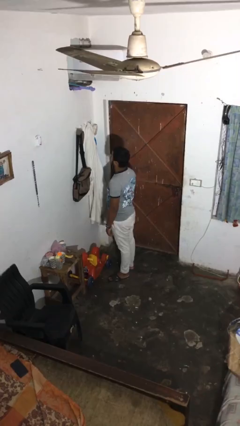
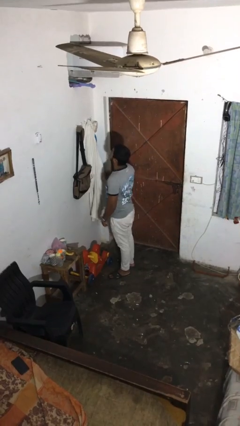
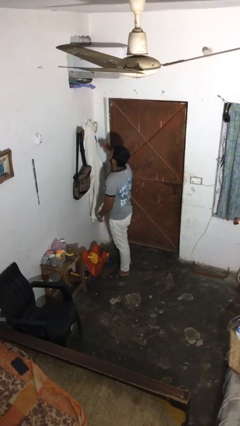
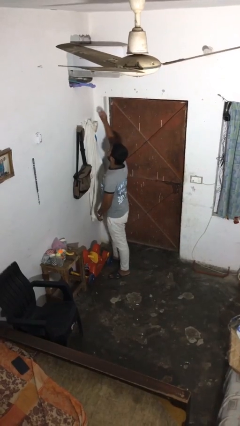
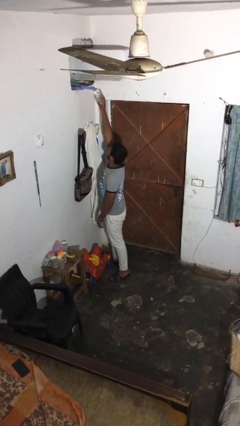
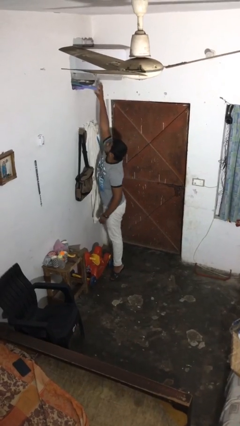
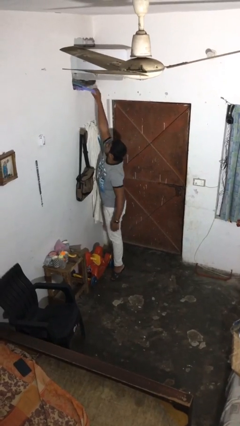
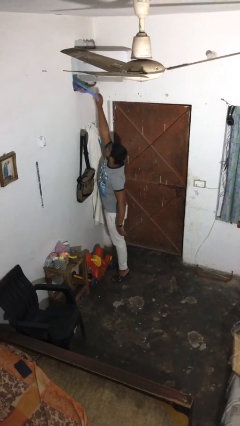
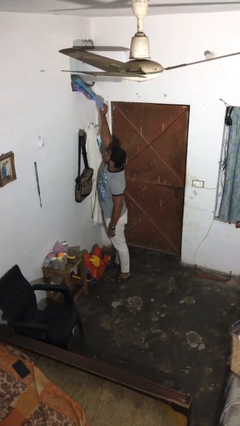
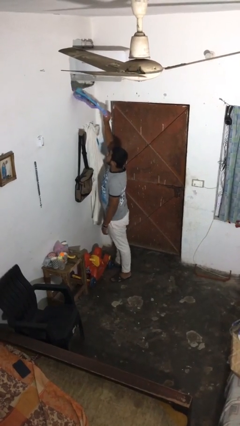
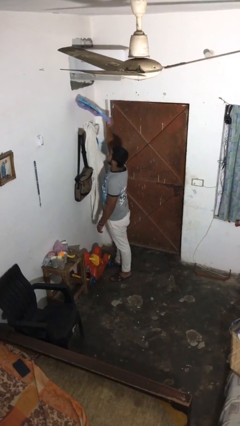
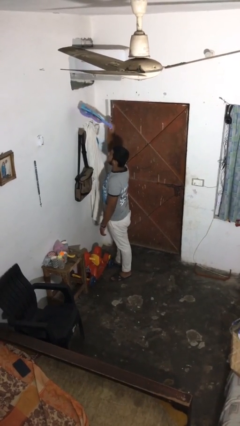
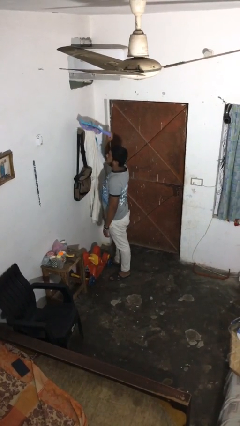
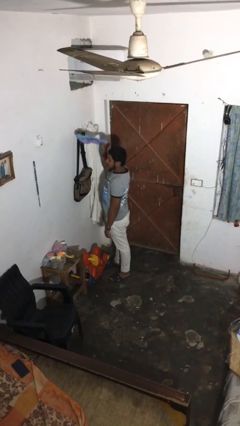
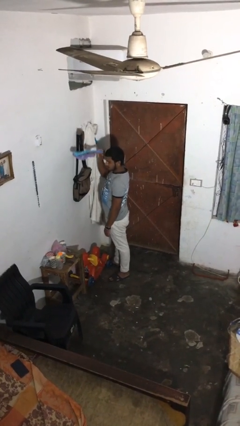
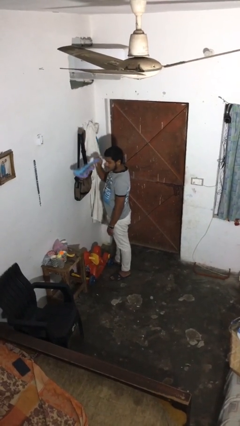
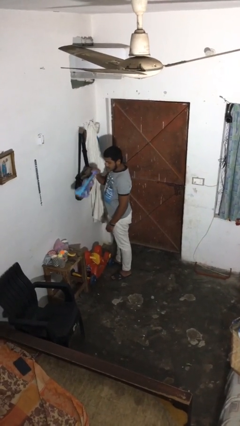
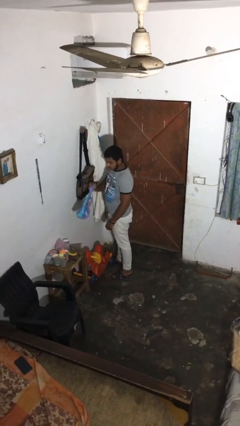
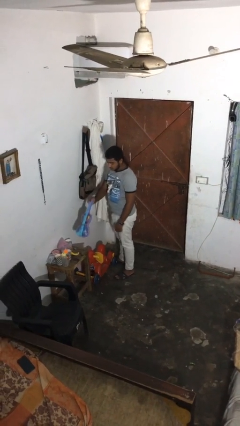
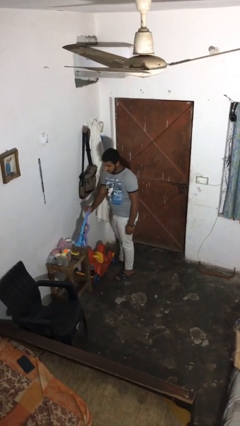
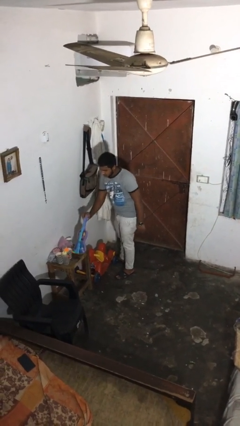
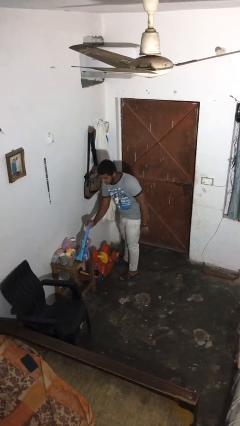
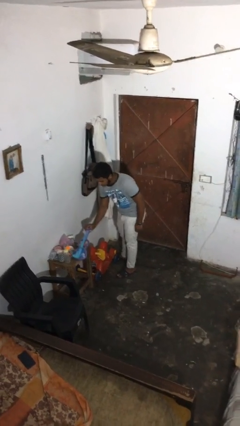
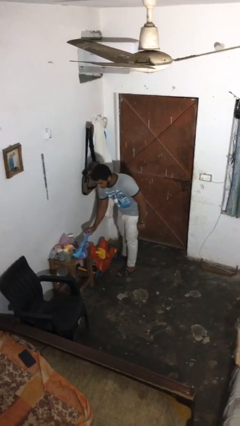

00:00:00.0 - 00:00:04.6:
person picks up object from shelf

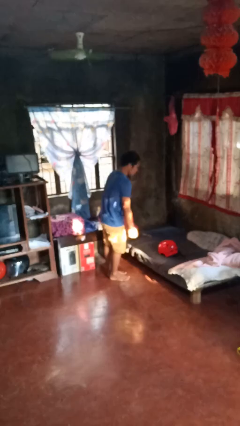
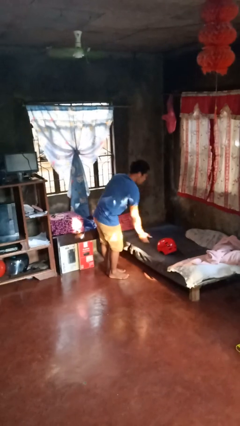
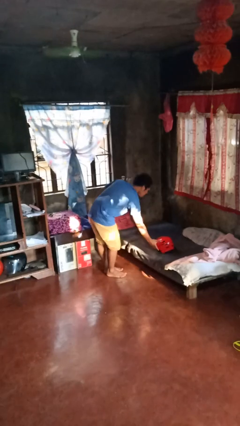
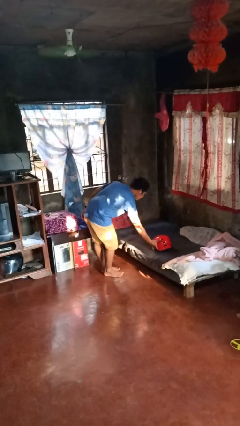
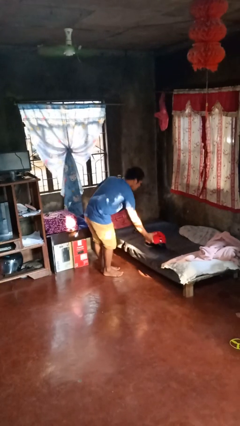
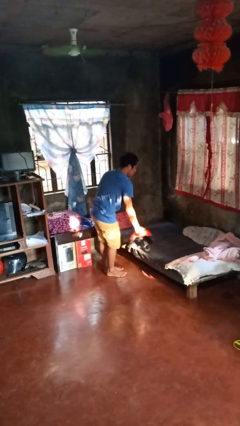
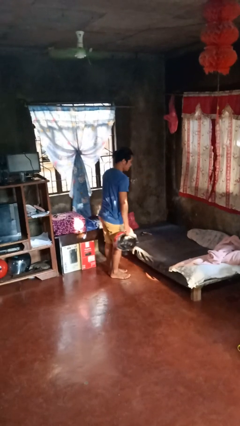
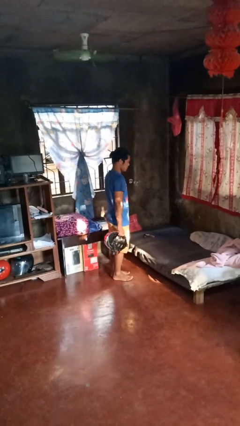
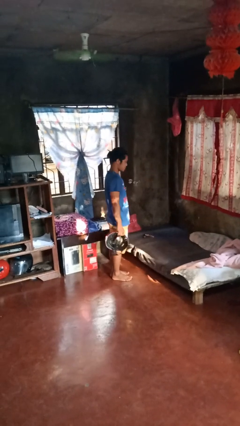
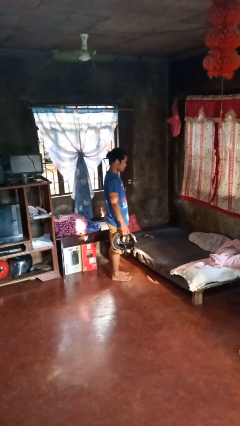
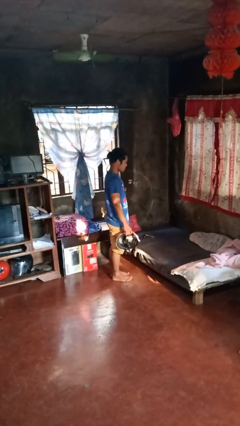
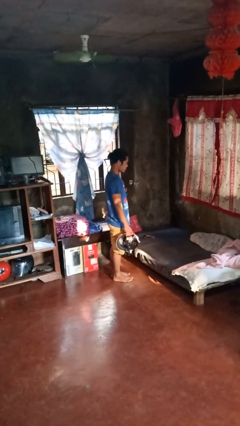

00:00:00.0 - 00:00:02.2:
person picks up object from bed

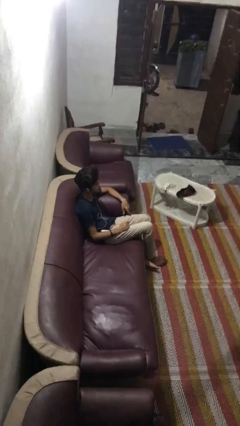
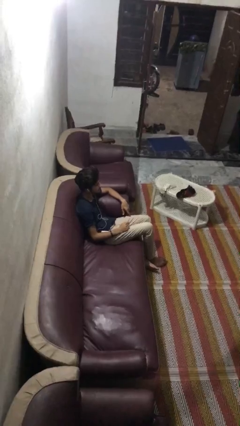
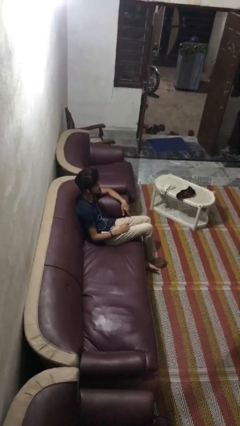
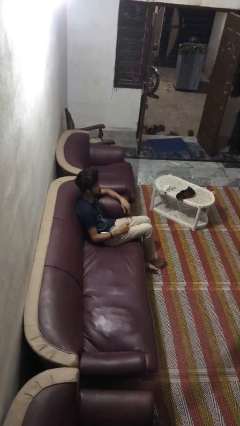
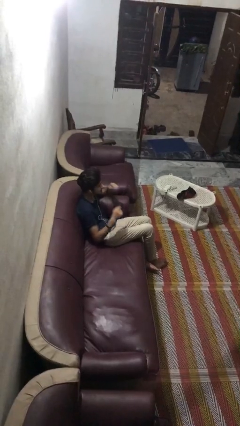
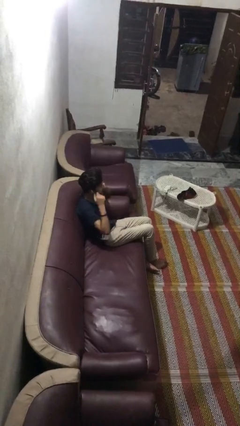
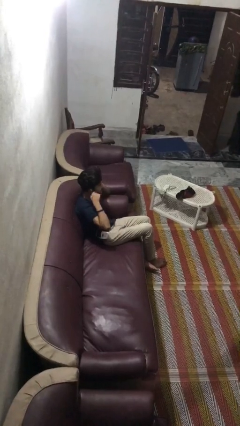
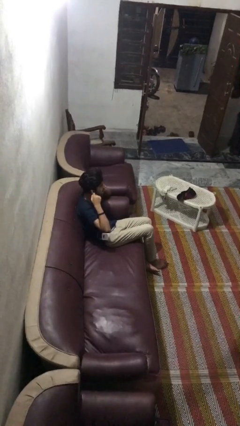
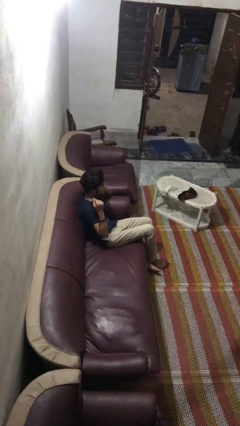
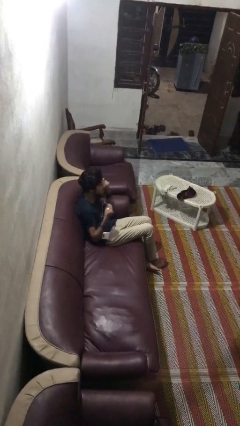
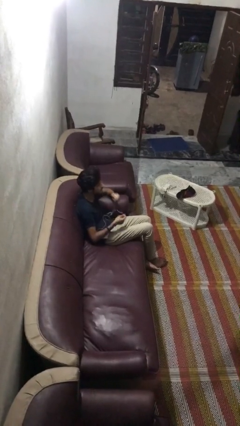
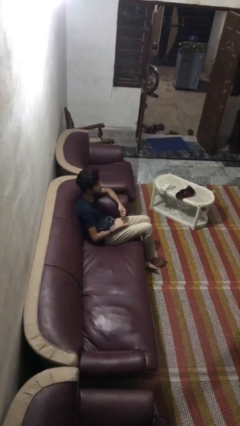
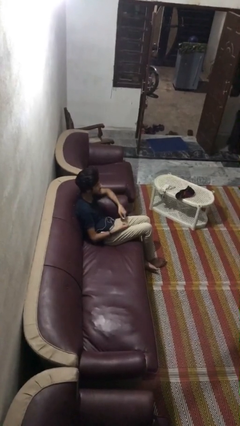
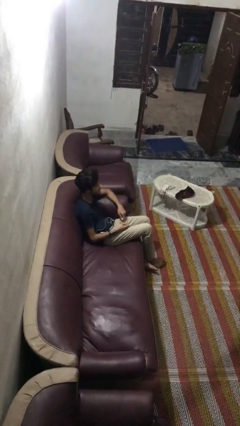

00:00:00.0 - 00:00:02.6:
person takes off headphones

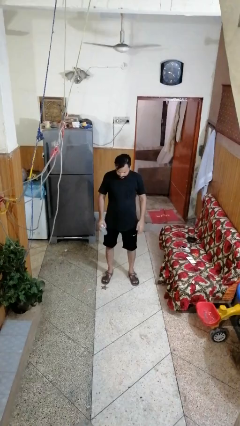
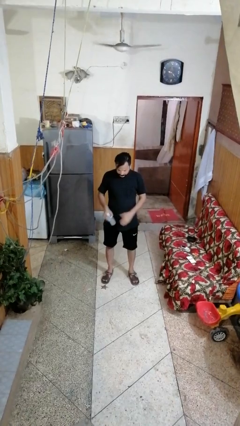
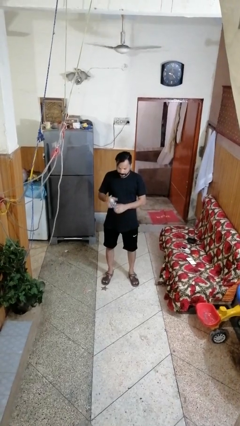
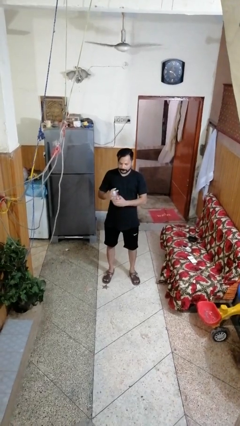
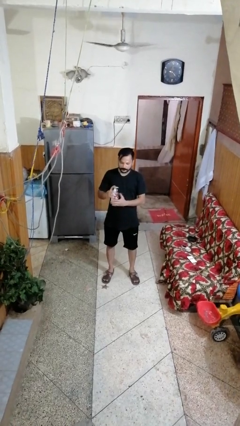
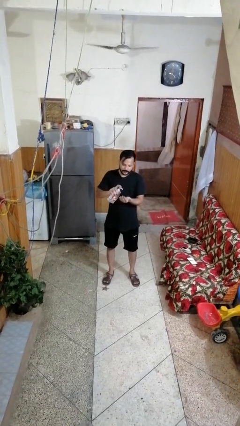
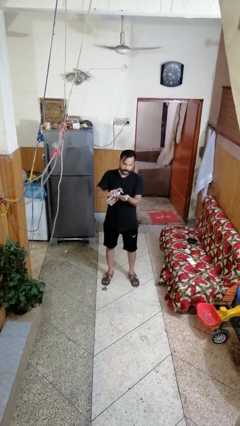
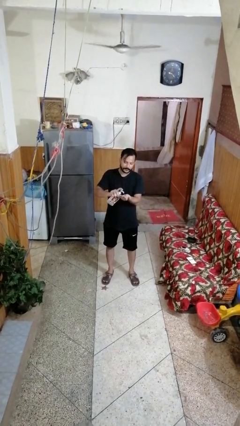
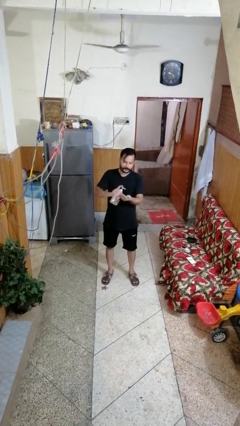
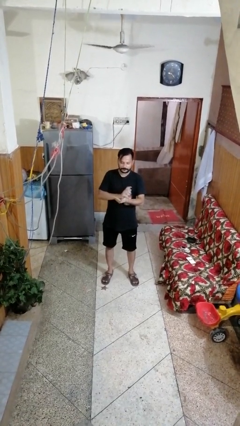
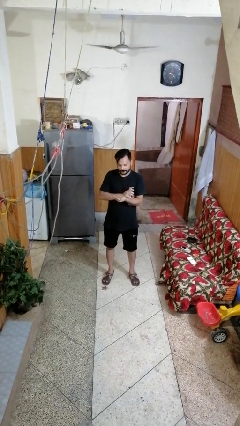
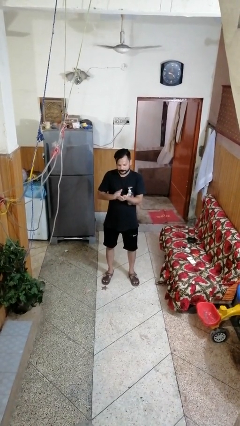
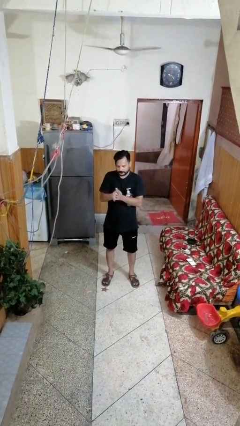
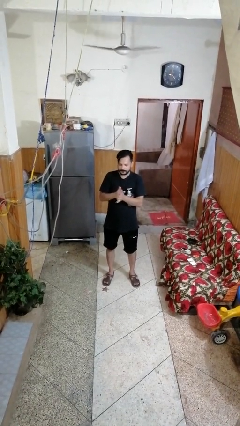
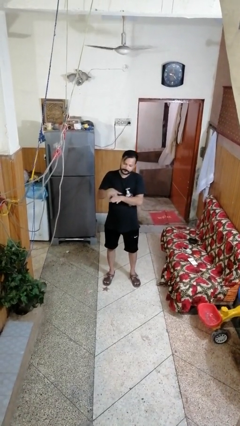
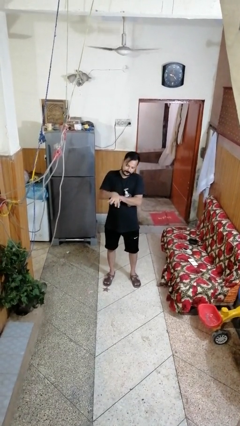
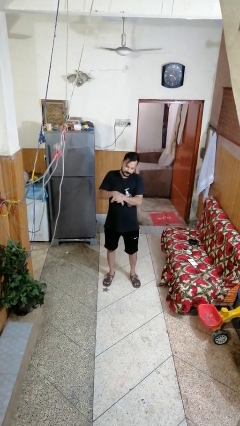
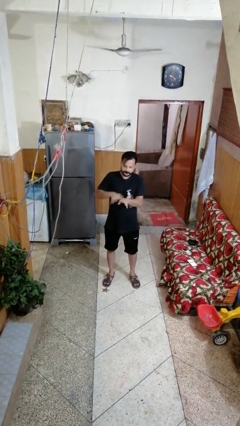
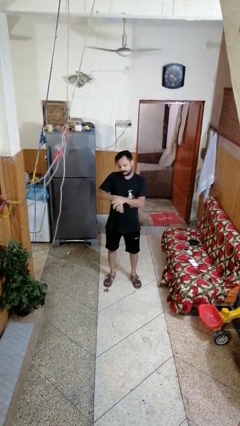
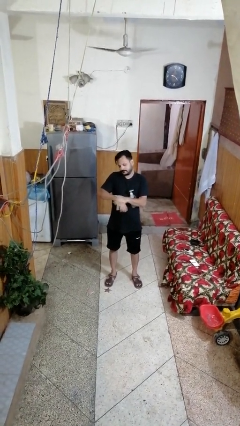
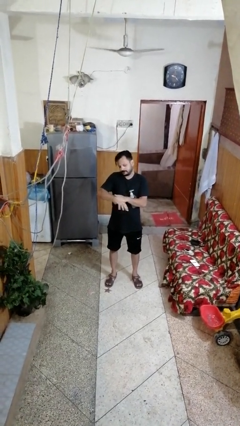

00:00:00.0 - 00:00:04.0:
person applies sunscreen

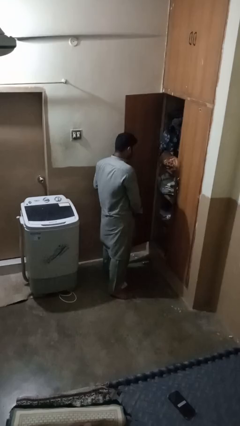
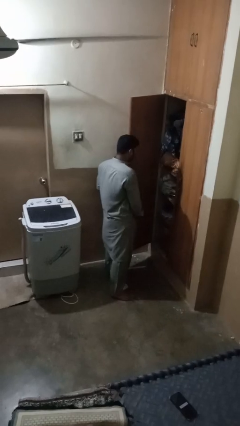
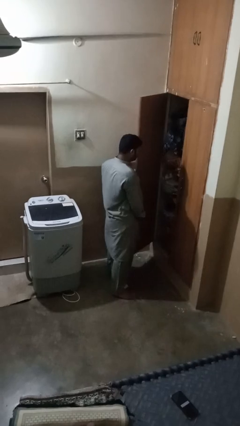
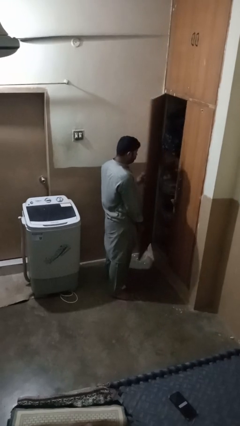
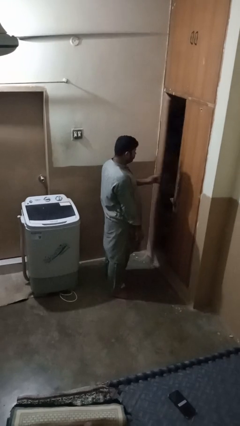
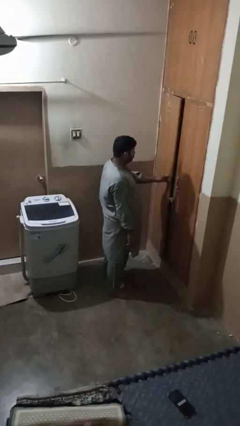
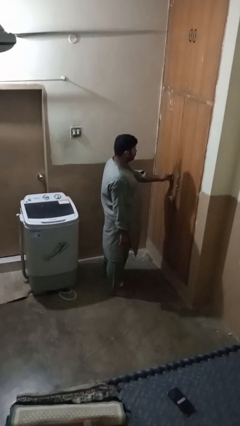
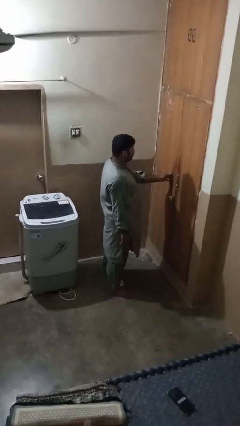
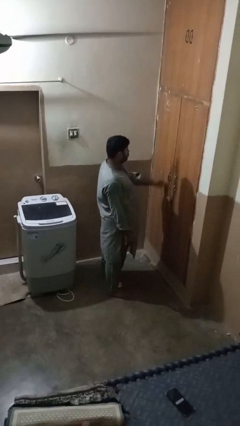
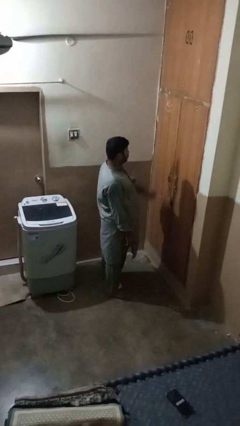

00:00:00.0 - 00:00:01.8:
person closes closet door

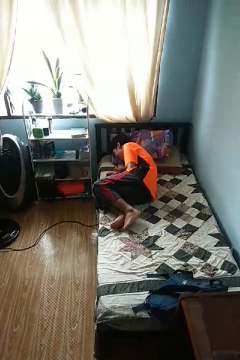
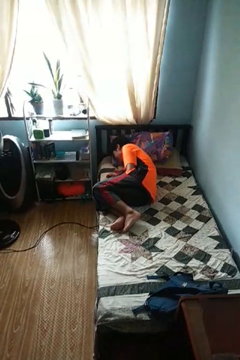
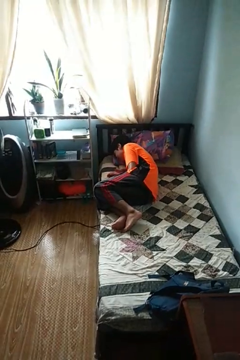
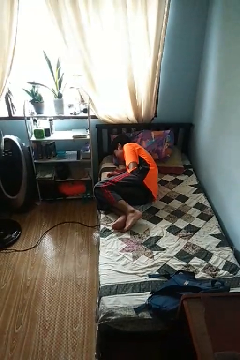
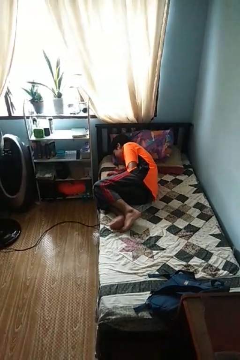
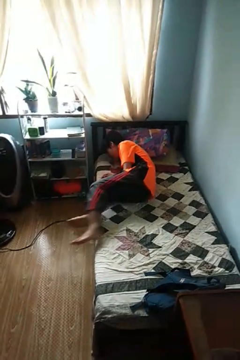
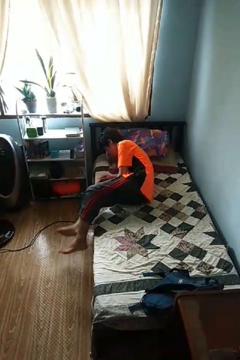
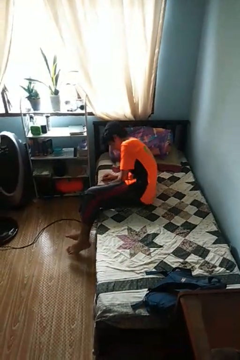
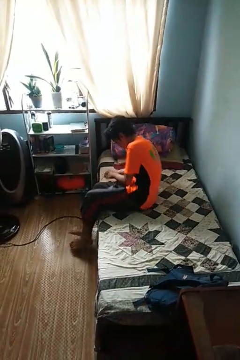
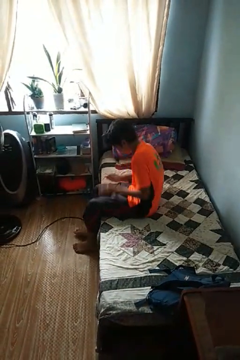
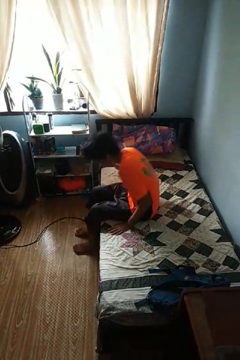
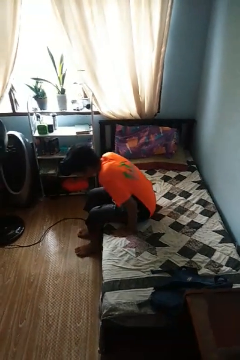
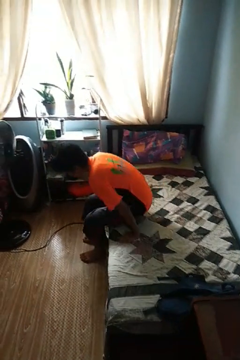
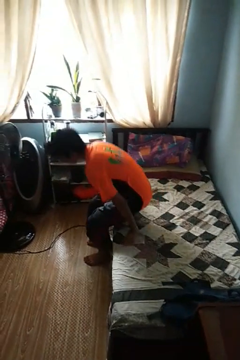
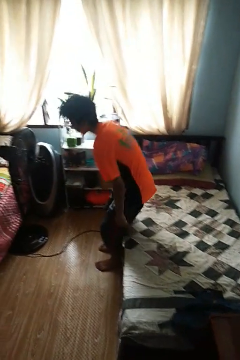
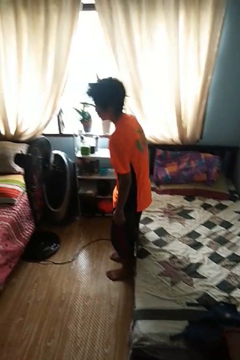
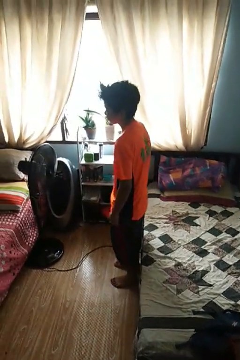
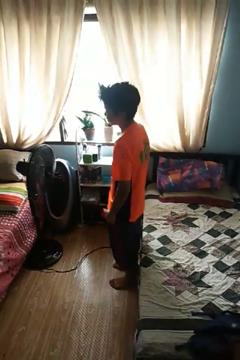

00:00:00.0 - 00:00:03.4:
person stands up
